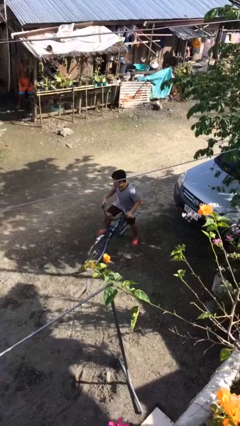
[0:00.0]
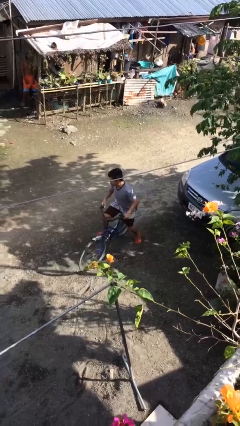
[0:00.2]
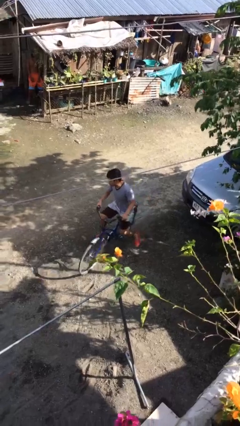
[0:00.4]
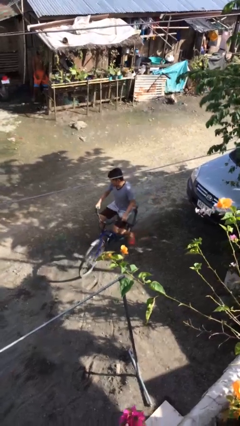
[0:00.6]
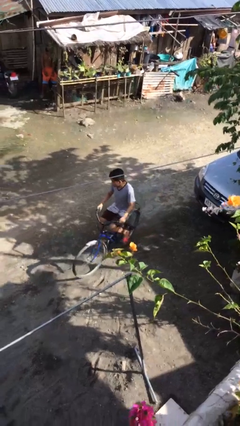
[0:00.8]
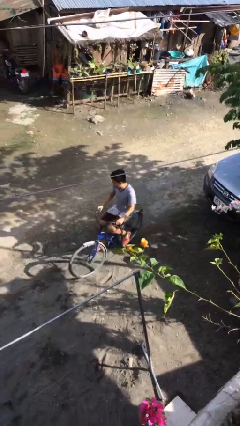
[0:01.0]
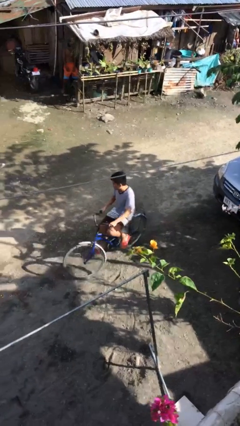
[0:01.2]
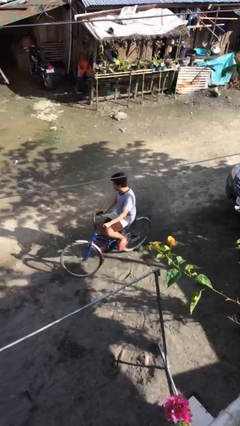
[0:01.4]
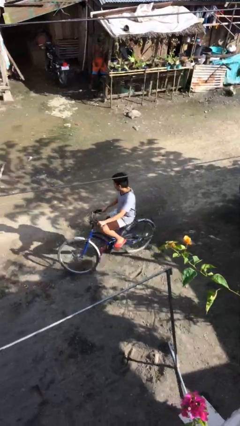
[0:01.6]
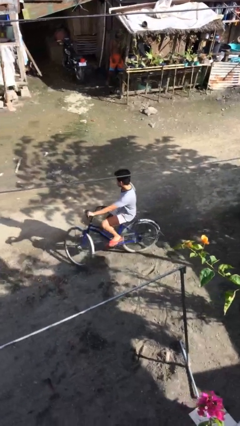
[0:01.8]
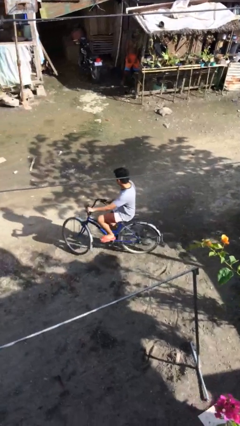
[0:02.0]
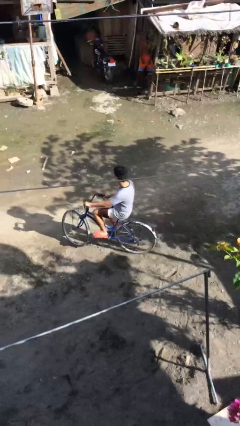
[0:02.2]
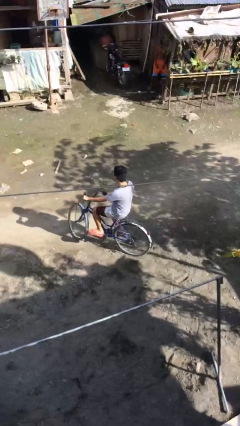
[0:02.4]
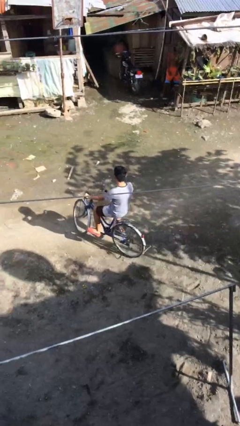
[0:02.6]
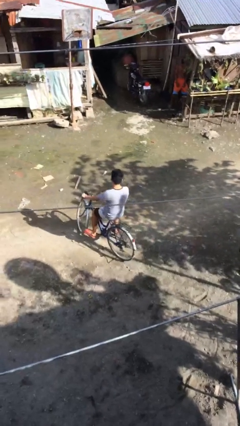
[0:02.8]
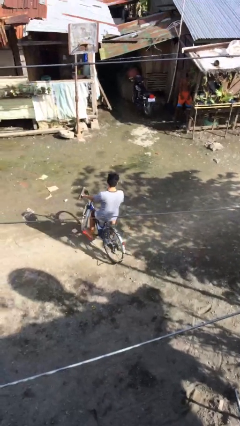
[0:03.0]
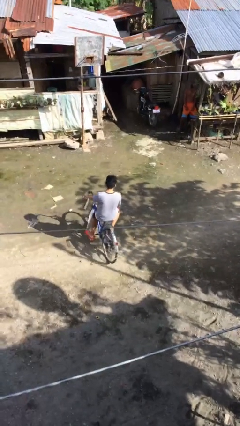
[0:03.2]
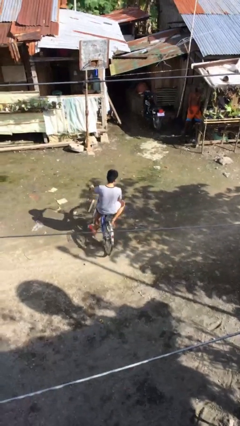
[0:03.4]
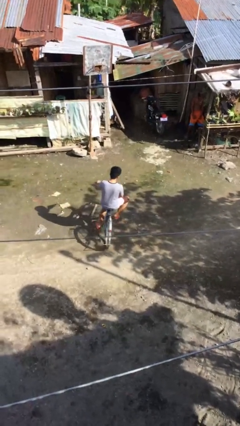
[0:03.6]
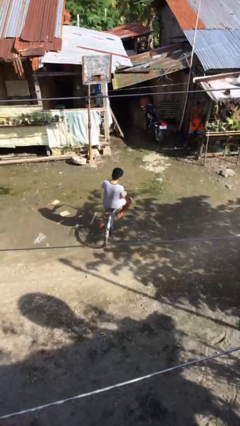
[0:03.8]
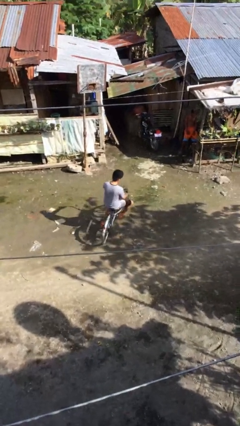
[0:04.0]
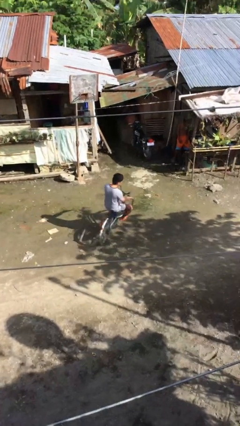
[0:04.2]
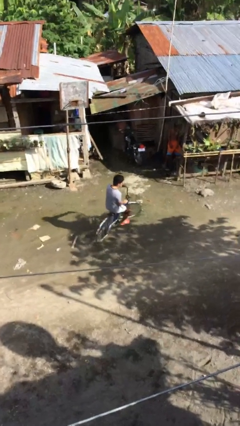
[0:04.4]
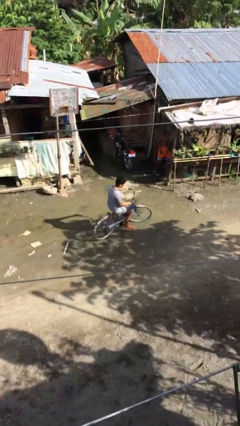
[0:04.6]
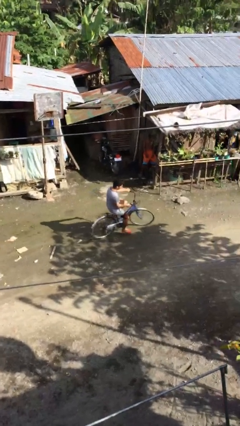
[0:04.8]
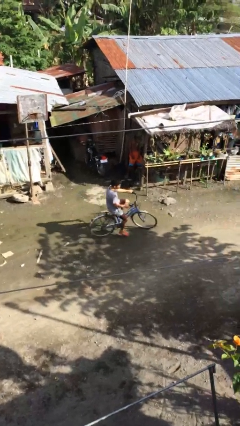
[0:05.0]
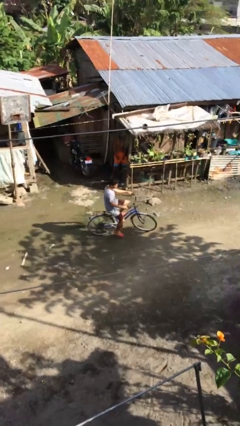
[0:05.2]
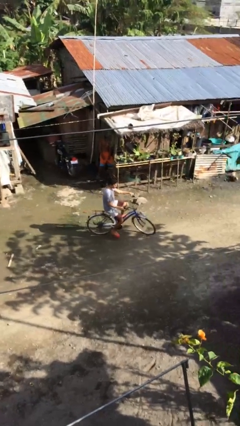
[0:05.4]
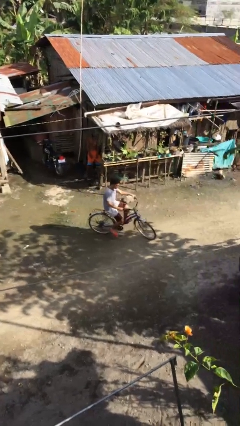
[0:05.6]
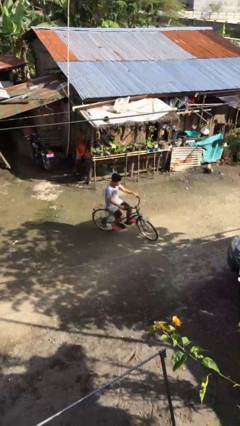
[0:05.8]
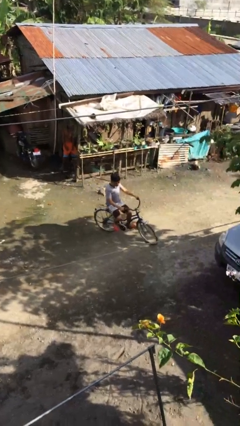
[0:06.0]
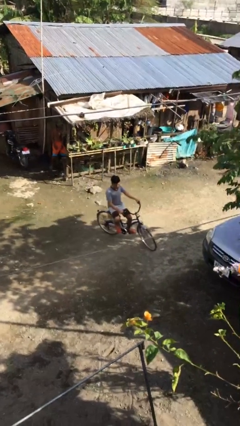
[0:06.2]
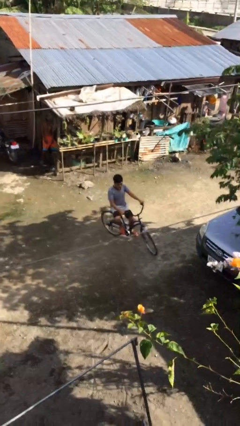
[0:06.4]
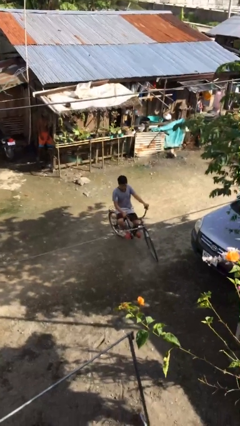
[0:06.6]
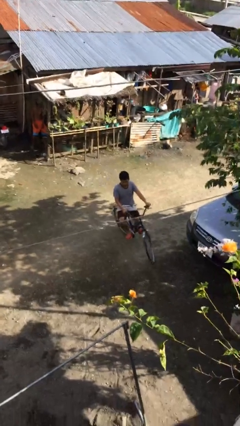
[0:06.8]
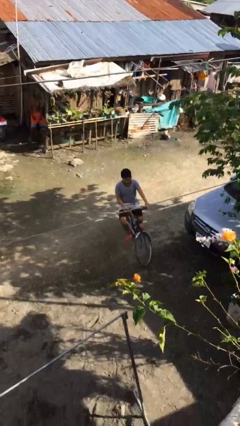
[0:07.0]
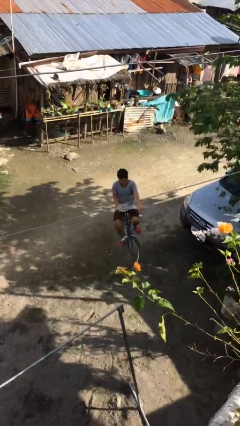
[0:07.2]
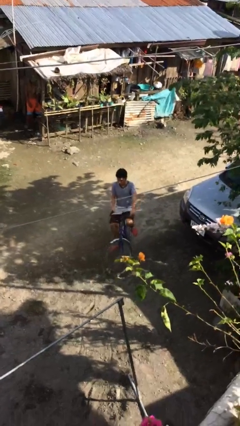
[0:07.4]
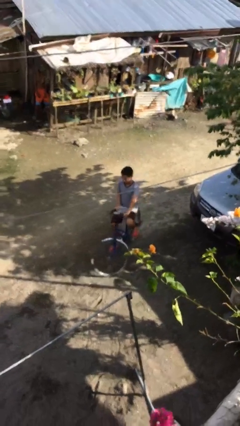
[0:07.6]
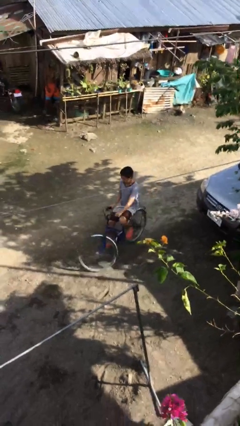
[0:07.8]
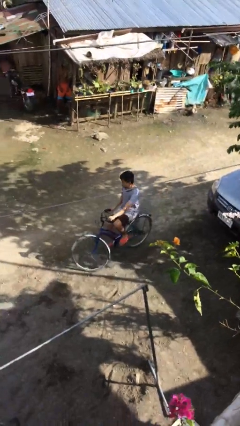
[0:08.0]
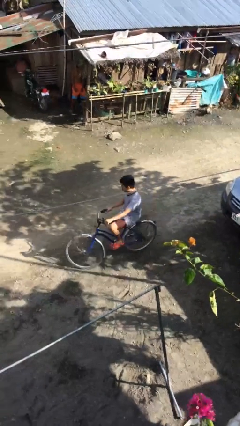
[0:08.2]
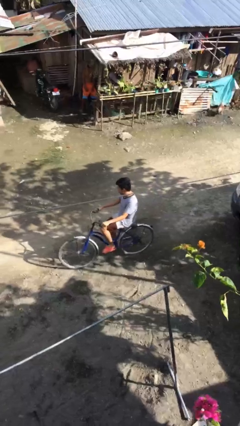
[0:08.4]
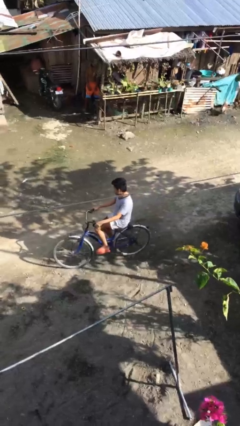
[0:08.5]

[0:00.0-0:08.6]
person rides bicycle

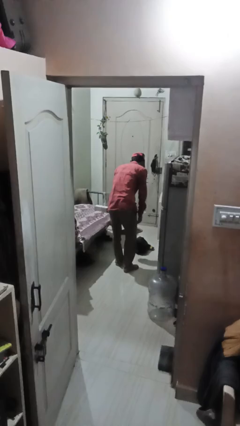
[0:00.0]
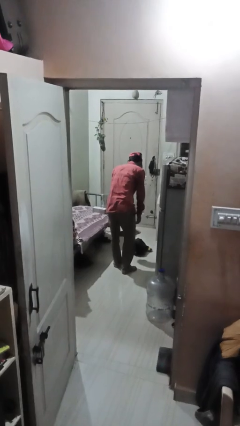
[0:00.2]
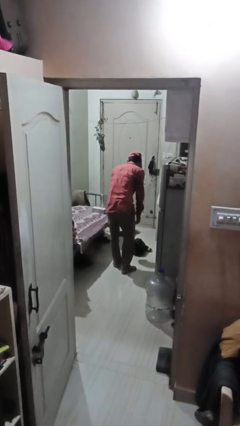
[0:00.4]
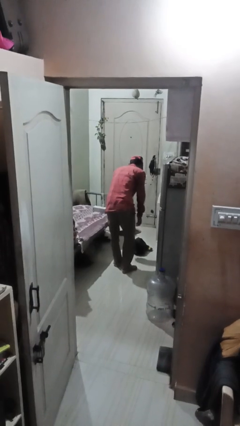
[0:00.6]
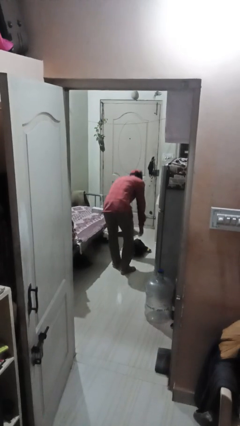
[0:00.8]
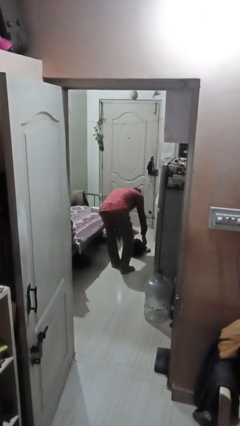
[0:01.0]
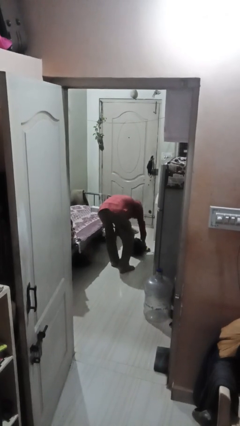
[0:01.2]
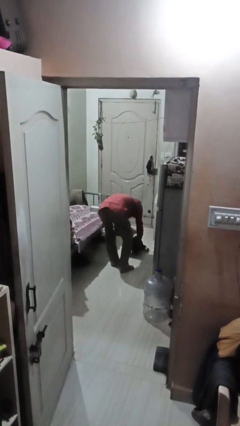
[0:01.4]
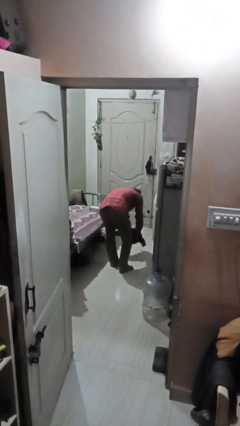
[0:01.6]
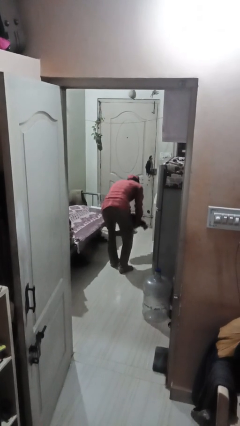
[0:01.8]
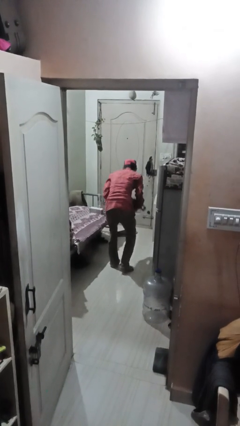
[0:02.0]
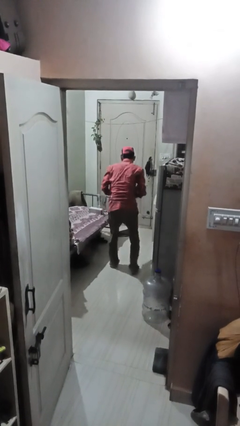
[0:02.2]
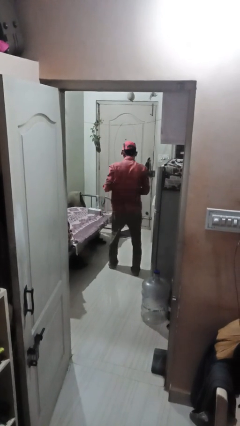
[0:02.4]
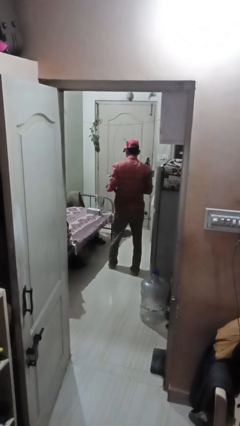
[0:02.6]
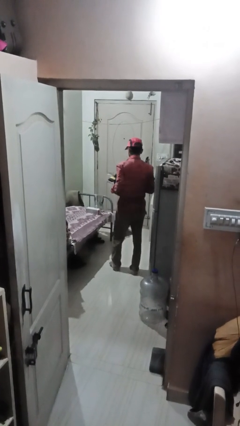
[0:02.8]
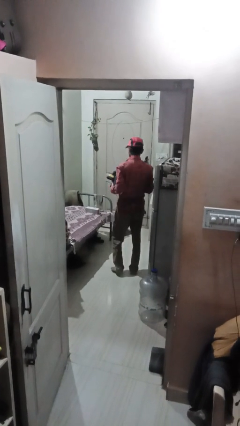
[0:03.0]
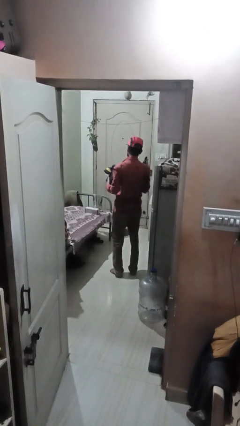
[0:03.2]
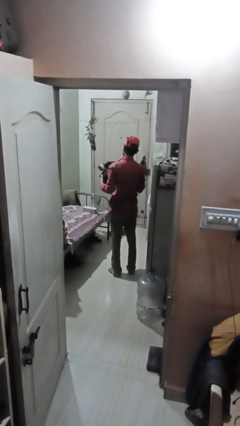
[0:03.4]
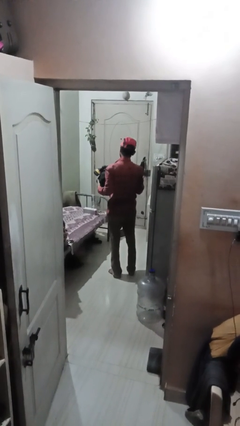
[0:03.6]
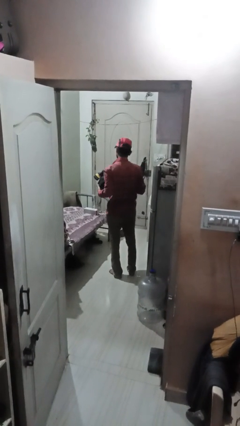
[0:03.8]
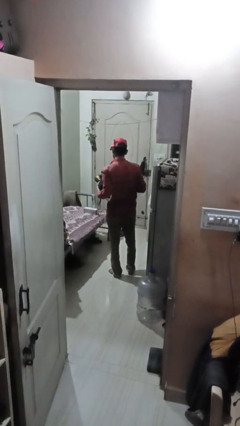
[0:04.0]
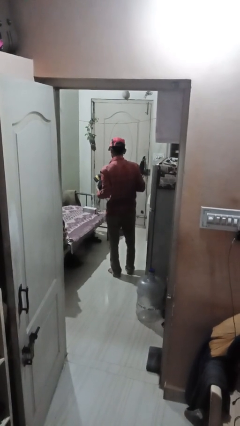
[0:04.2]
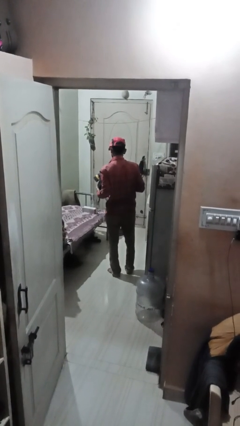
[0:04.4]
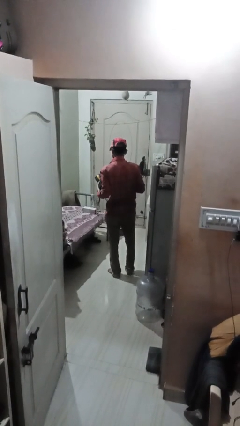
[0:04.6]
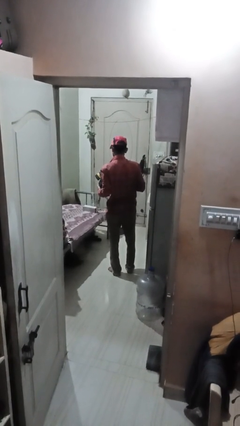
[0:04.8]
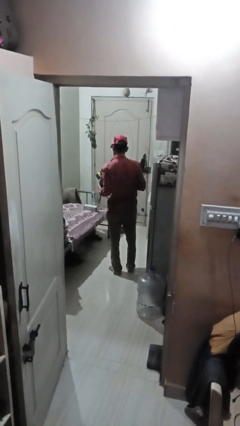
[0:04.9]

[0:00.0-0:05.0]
person picks up object from floor

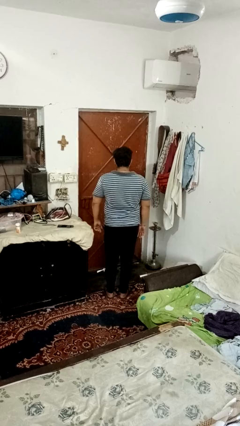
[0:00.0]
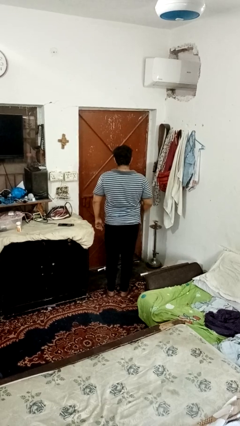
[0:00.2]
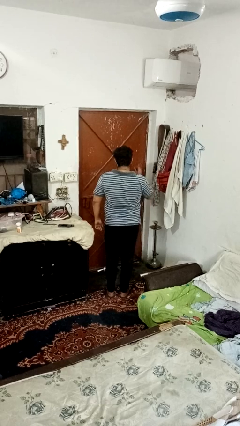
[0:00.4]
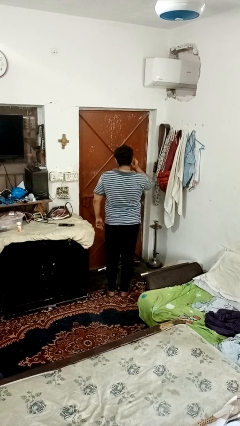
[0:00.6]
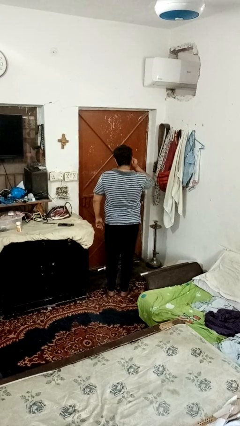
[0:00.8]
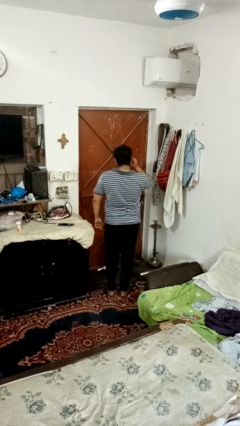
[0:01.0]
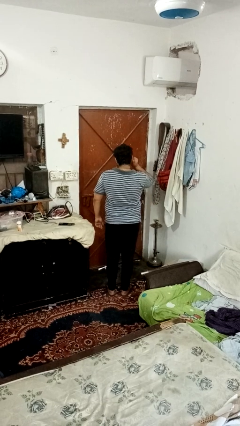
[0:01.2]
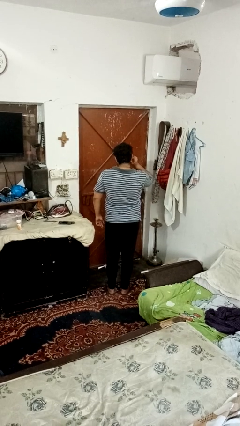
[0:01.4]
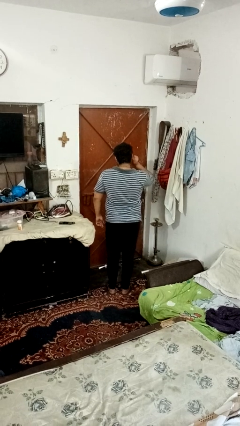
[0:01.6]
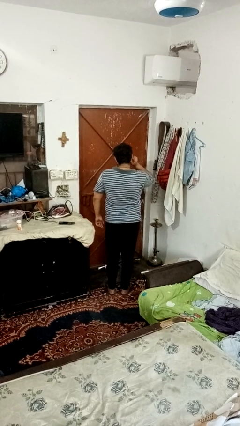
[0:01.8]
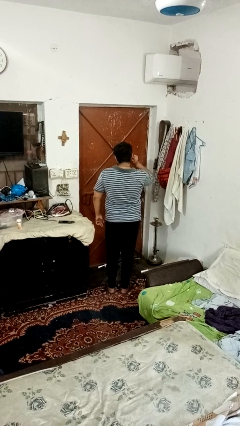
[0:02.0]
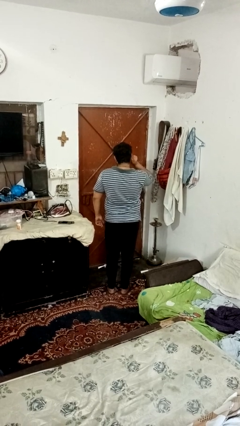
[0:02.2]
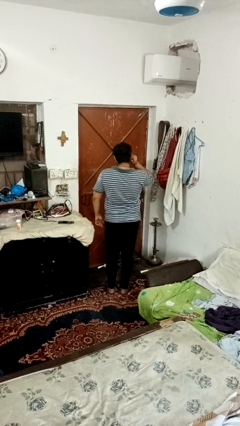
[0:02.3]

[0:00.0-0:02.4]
person touches earlobe

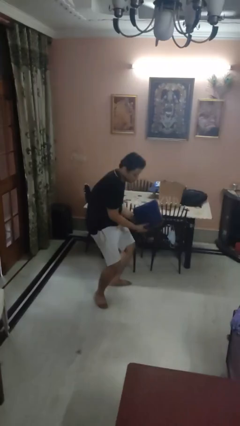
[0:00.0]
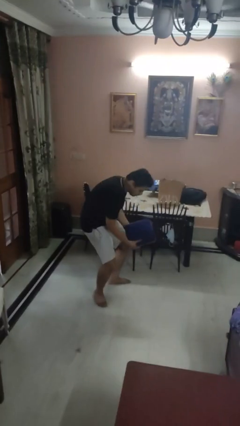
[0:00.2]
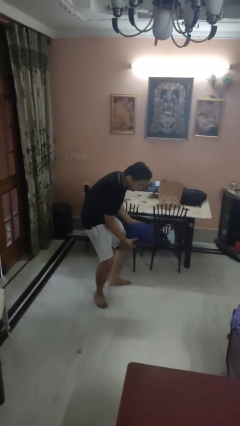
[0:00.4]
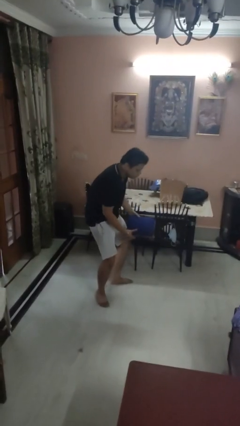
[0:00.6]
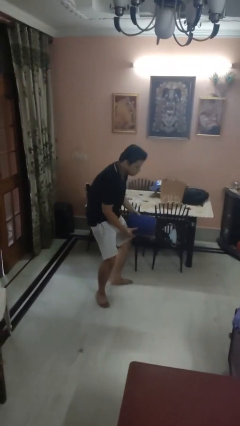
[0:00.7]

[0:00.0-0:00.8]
person catches dropped object

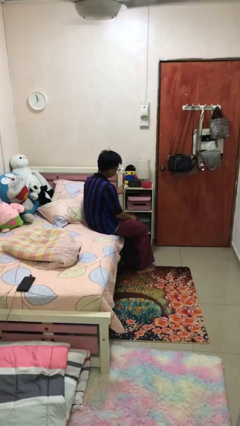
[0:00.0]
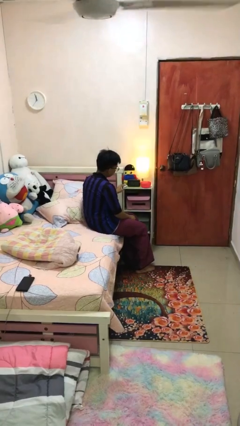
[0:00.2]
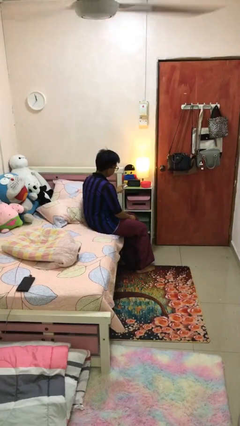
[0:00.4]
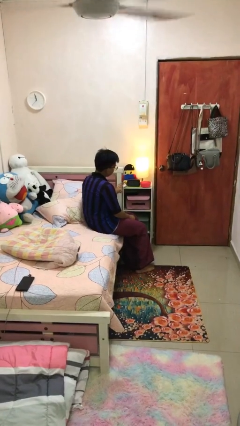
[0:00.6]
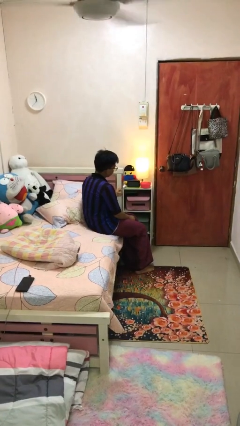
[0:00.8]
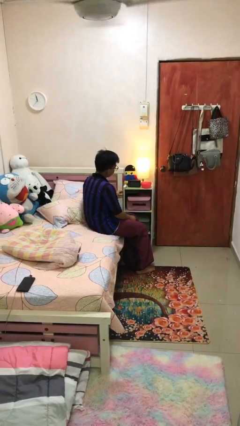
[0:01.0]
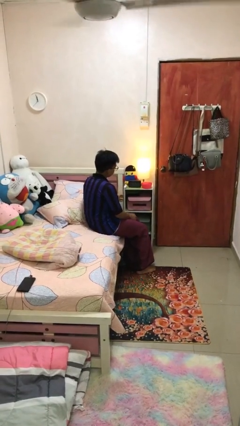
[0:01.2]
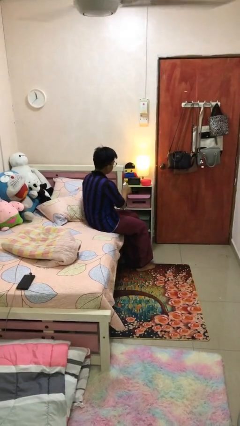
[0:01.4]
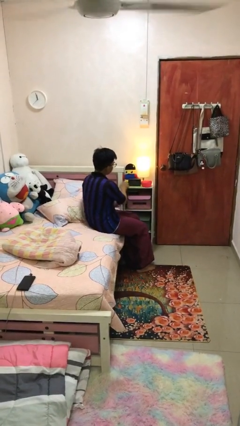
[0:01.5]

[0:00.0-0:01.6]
person turns on lamp
